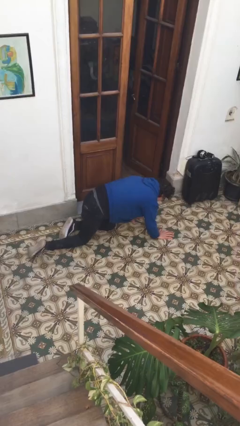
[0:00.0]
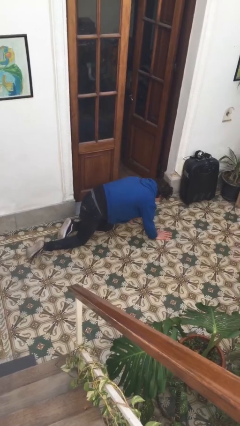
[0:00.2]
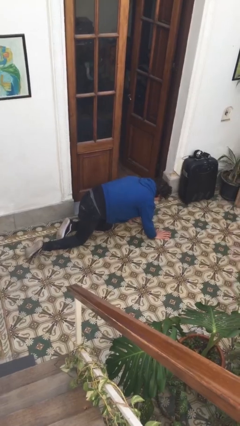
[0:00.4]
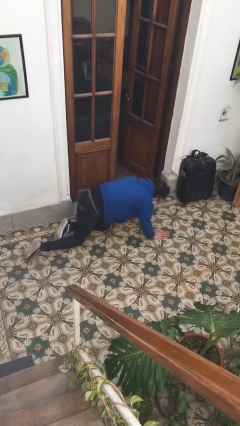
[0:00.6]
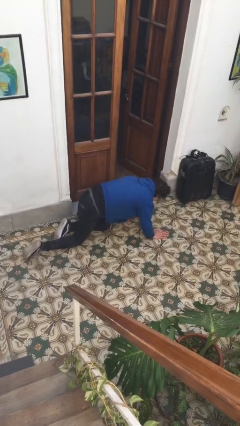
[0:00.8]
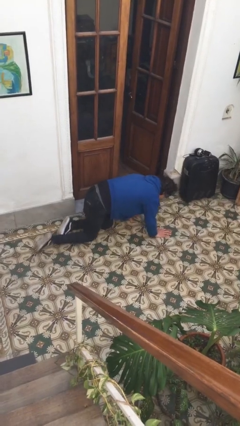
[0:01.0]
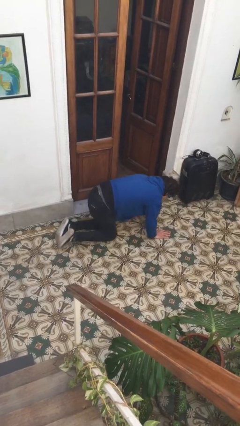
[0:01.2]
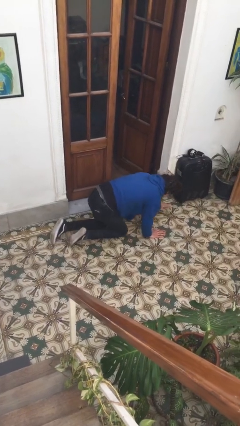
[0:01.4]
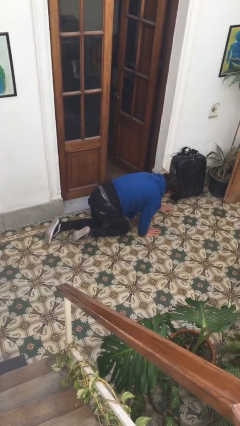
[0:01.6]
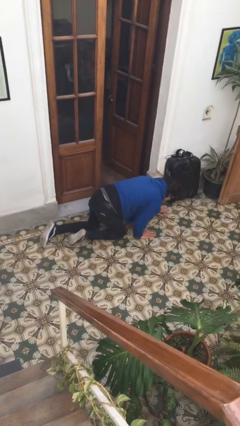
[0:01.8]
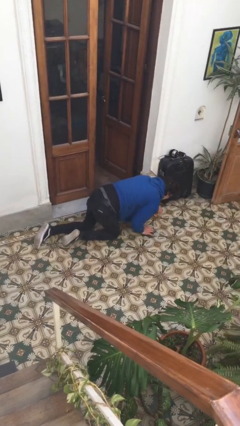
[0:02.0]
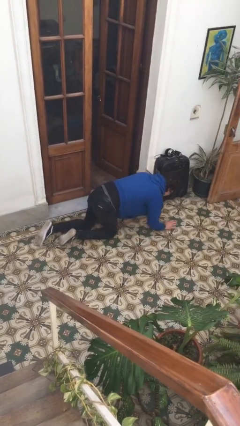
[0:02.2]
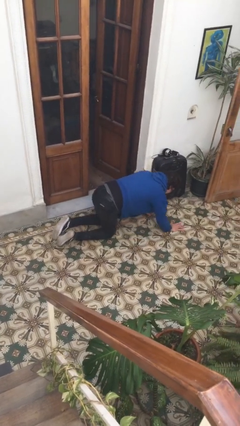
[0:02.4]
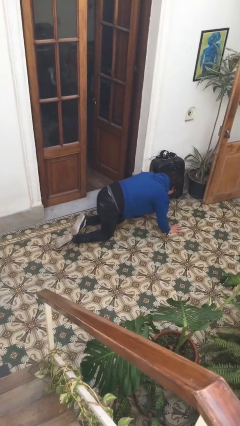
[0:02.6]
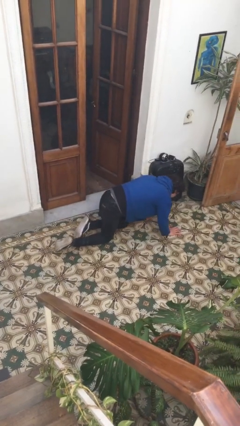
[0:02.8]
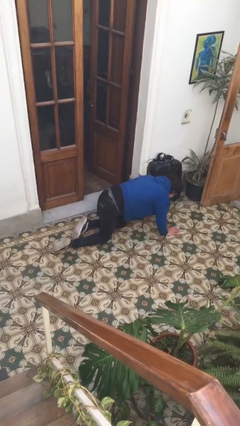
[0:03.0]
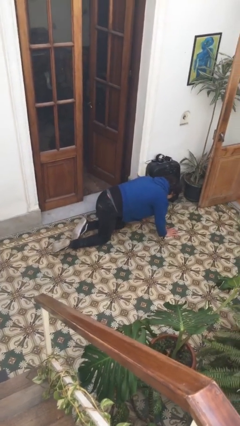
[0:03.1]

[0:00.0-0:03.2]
person crawls

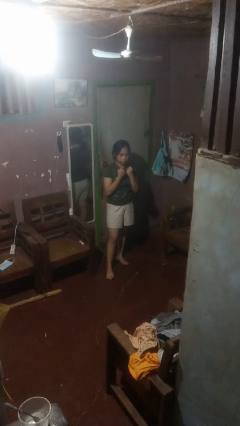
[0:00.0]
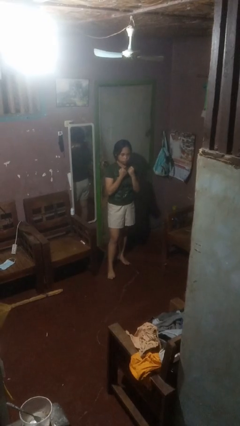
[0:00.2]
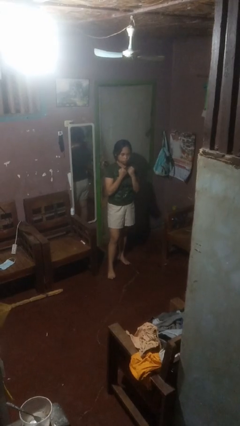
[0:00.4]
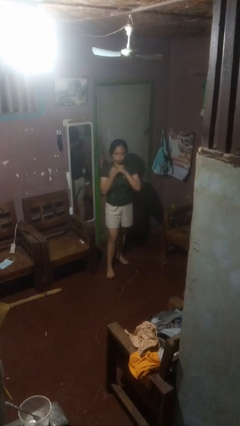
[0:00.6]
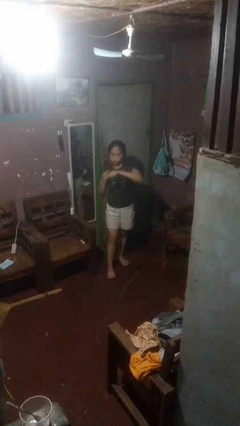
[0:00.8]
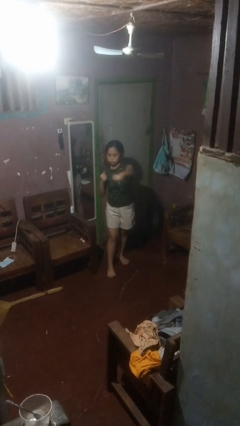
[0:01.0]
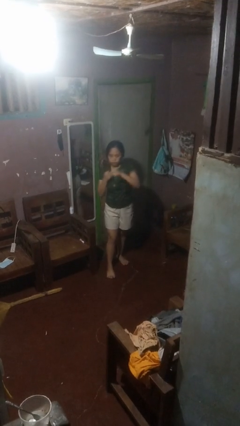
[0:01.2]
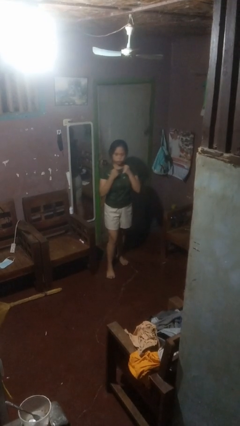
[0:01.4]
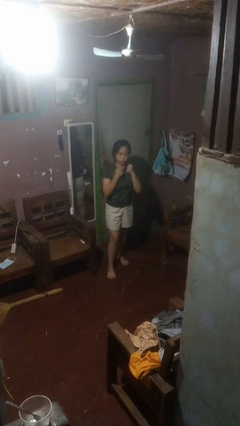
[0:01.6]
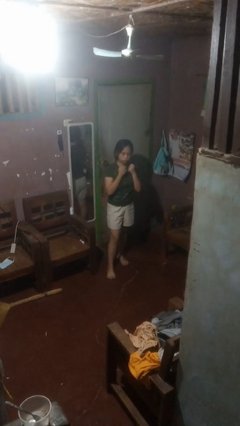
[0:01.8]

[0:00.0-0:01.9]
person punches

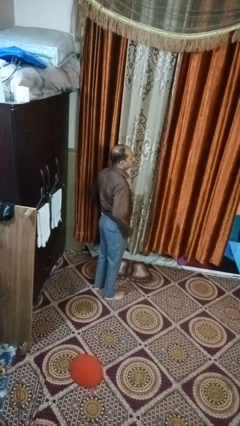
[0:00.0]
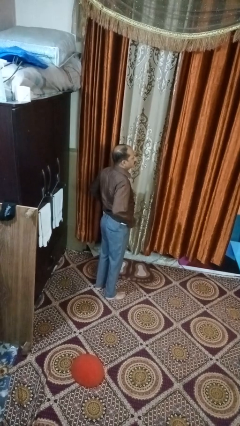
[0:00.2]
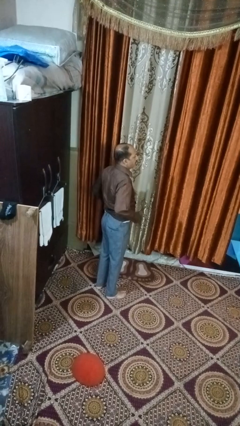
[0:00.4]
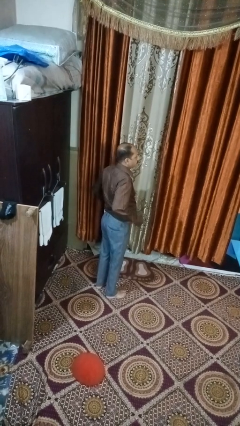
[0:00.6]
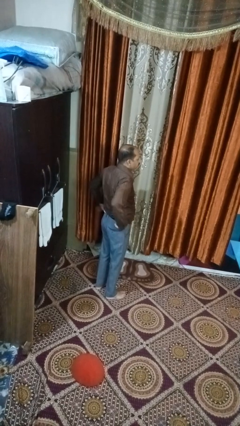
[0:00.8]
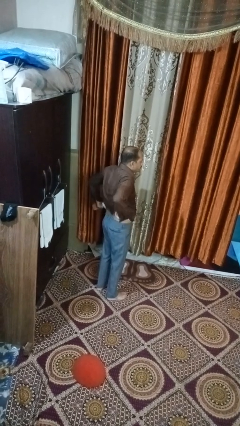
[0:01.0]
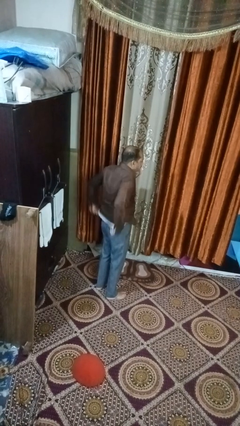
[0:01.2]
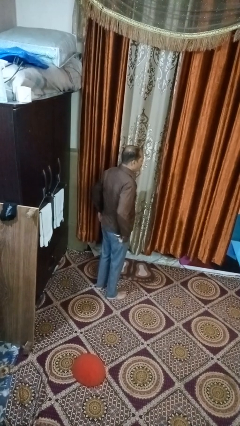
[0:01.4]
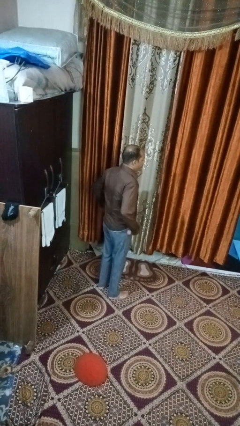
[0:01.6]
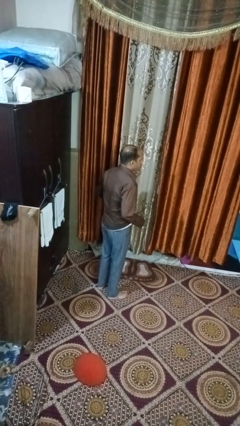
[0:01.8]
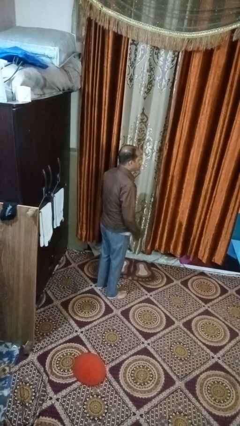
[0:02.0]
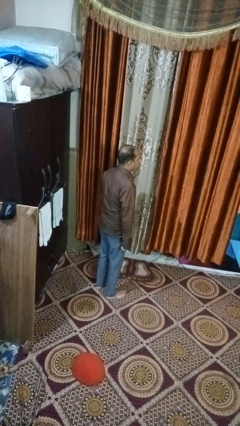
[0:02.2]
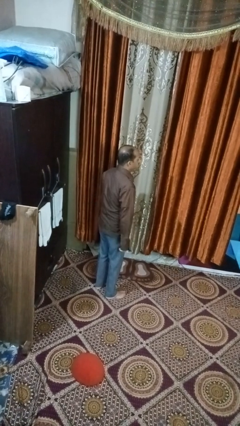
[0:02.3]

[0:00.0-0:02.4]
person untucks shirt

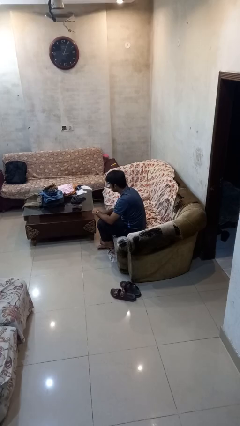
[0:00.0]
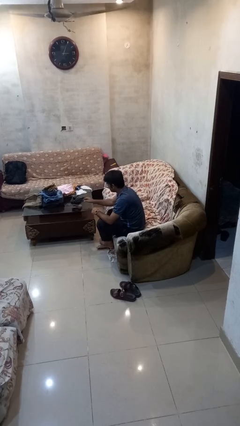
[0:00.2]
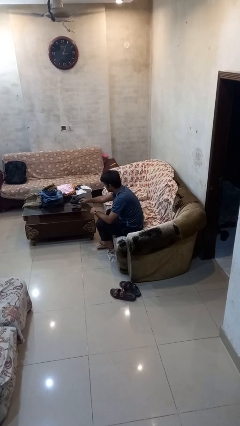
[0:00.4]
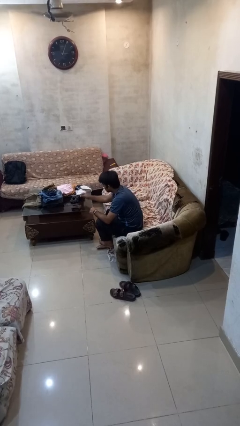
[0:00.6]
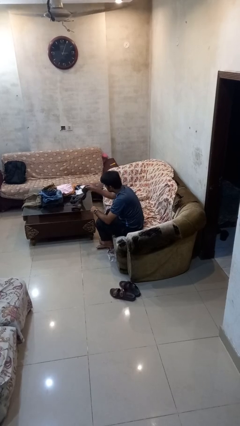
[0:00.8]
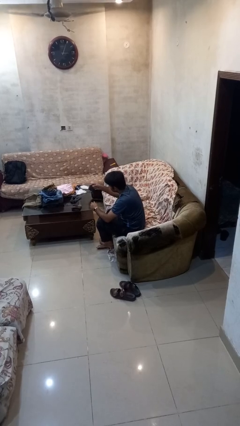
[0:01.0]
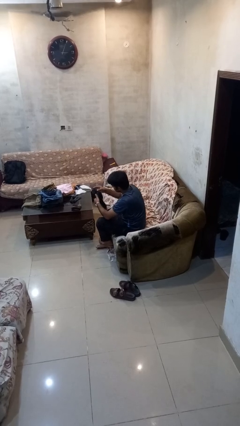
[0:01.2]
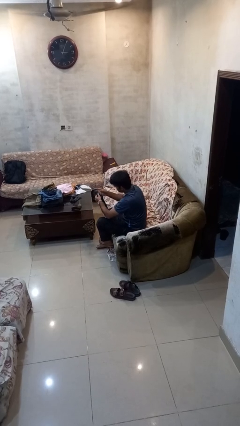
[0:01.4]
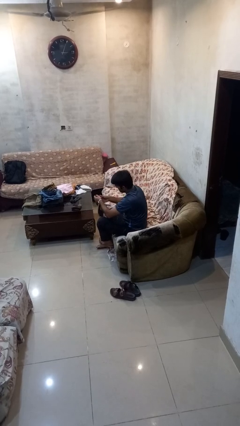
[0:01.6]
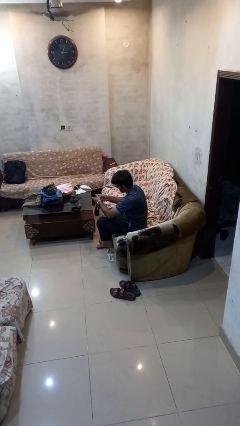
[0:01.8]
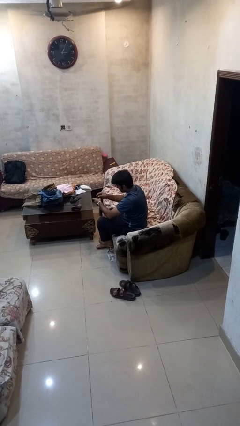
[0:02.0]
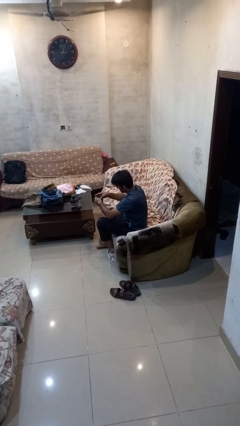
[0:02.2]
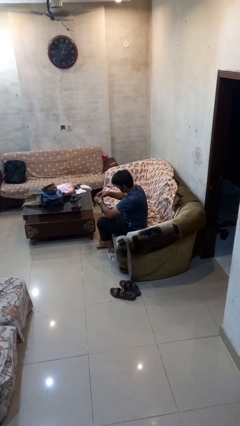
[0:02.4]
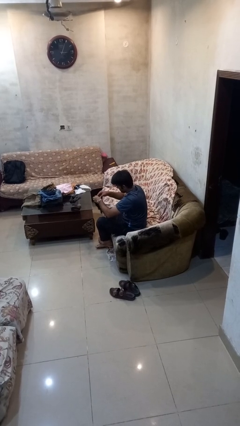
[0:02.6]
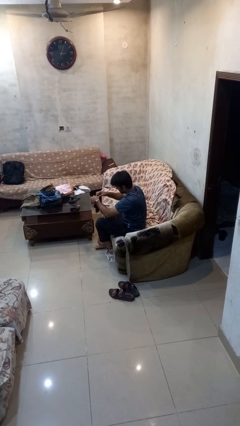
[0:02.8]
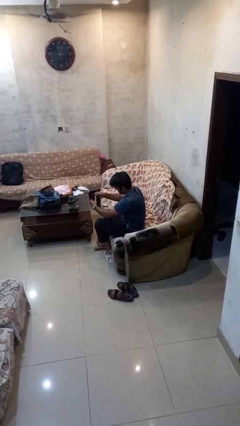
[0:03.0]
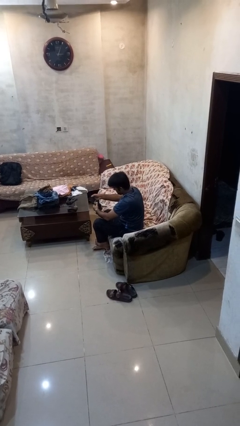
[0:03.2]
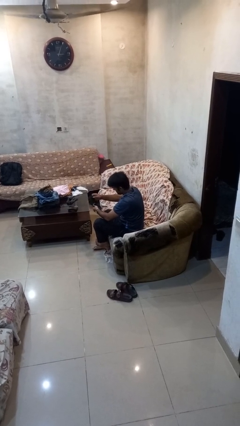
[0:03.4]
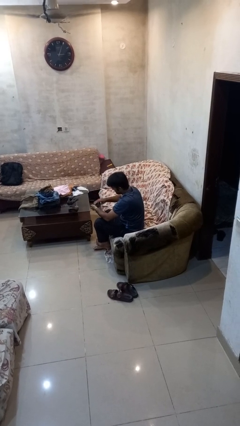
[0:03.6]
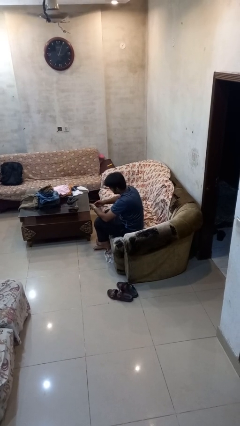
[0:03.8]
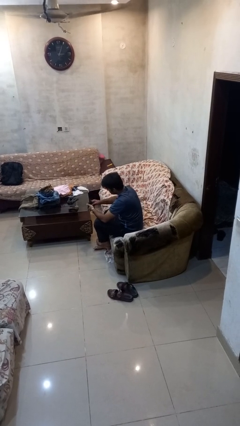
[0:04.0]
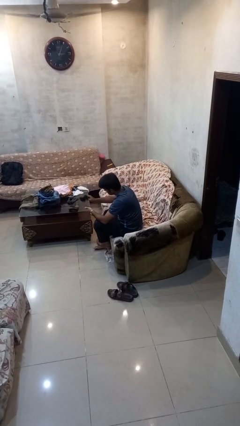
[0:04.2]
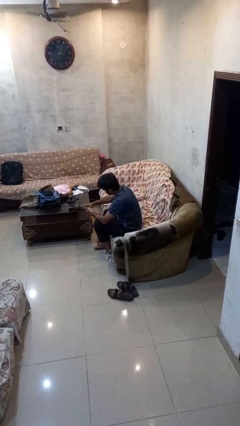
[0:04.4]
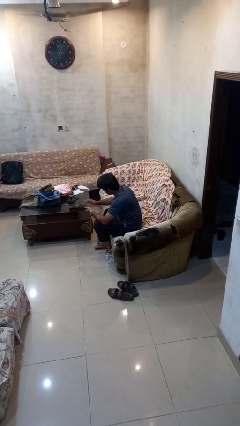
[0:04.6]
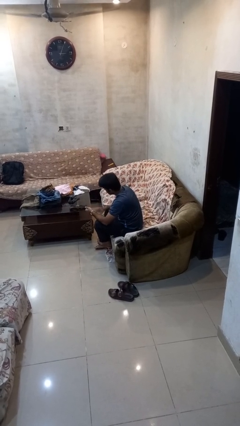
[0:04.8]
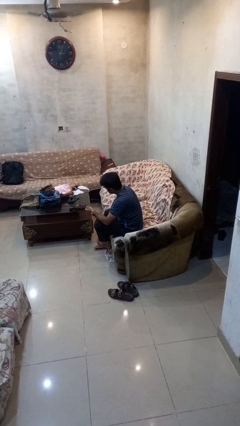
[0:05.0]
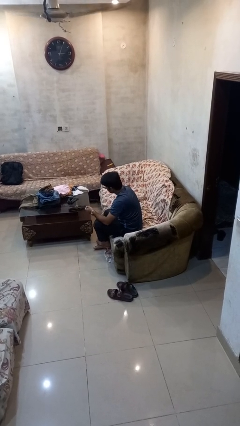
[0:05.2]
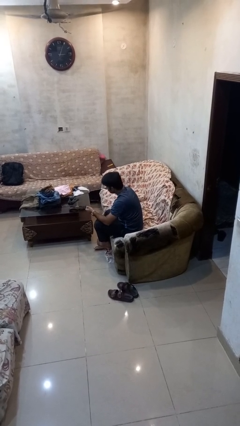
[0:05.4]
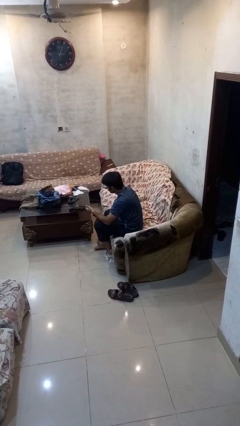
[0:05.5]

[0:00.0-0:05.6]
person folds socks

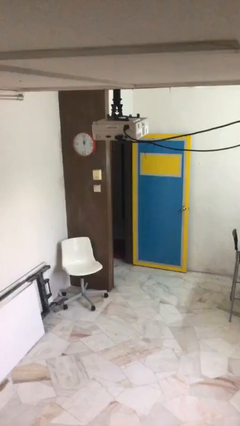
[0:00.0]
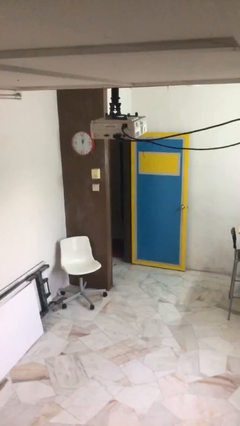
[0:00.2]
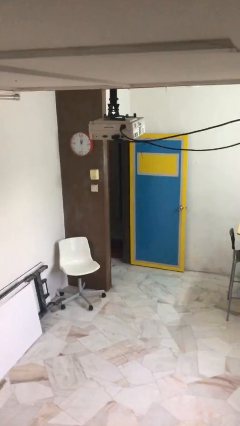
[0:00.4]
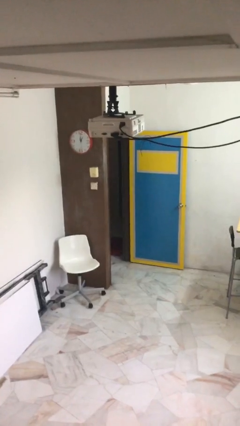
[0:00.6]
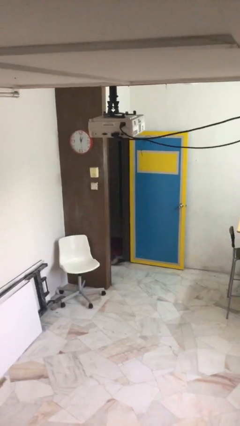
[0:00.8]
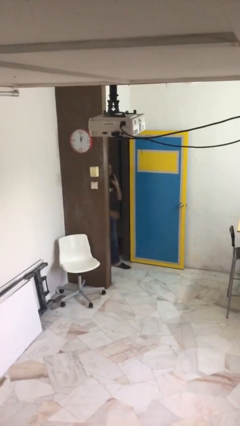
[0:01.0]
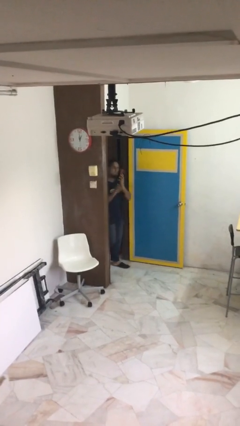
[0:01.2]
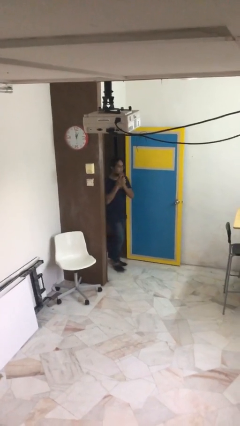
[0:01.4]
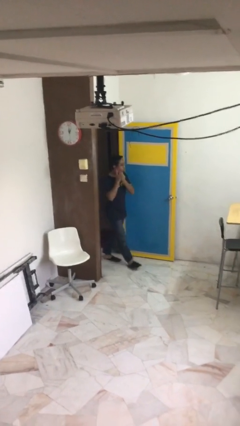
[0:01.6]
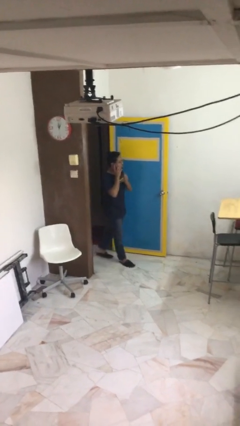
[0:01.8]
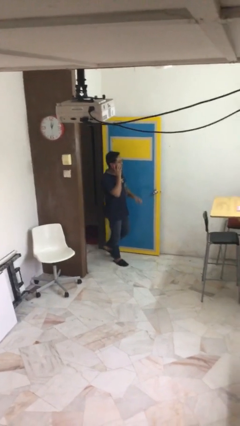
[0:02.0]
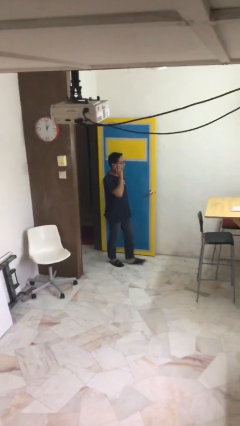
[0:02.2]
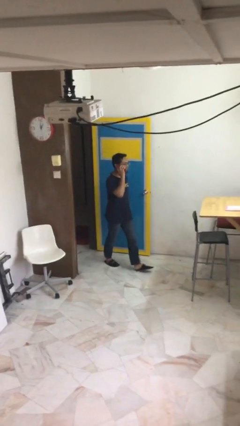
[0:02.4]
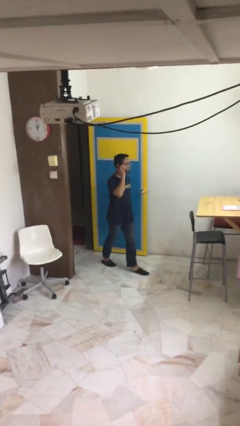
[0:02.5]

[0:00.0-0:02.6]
person enters scene through structure

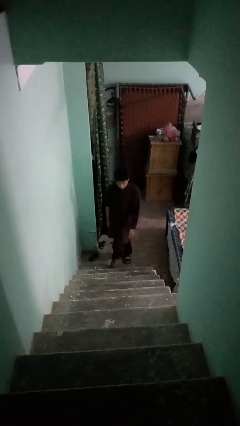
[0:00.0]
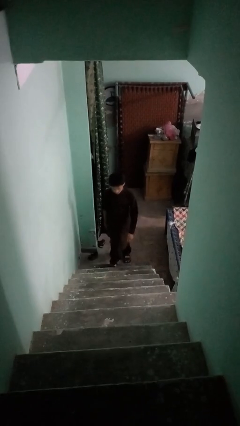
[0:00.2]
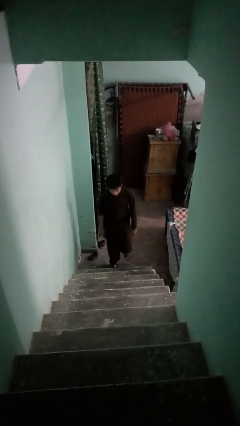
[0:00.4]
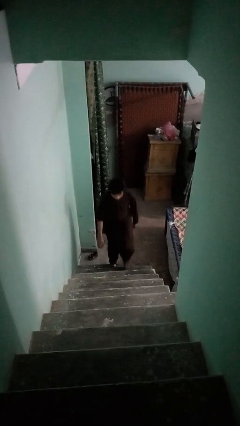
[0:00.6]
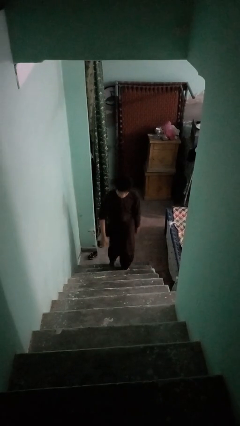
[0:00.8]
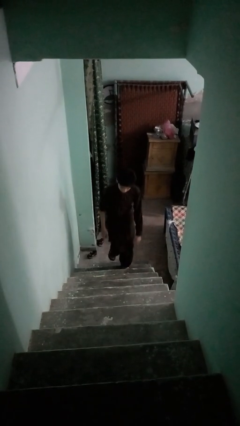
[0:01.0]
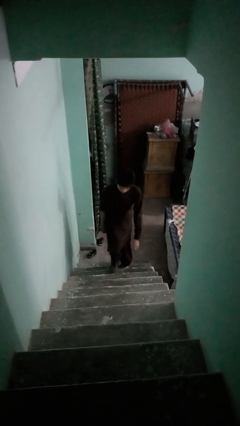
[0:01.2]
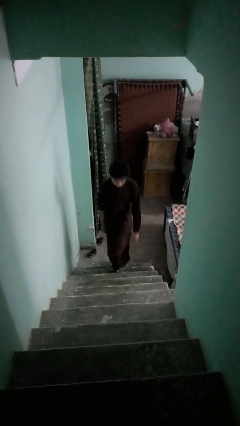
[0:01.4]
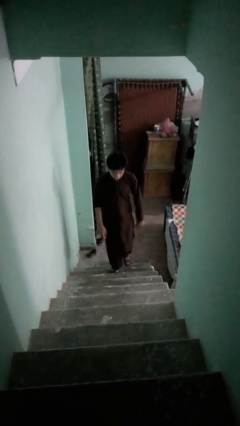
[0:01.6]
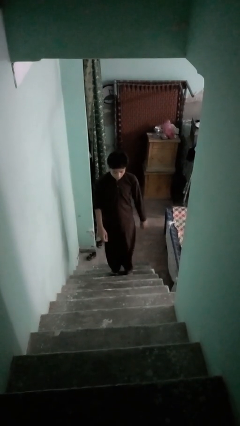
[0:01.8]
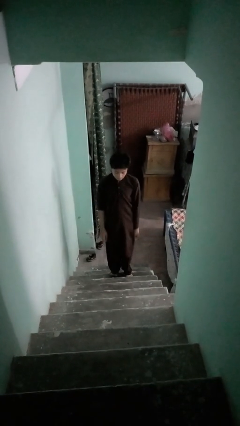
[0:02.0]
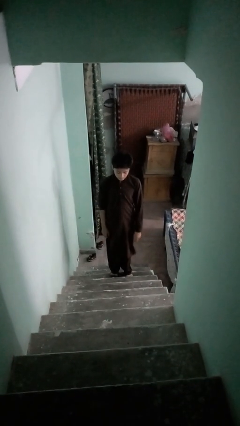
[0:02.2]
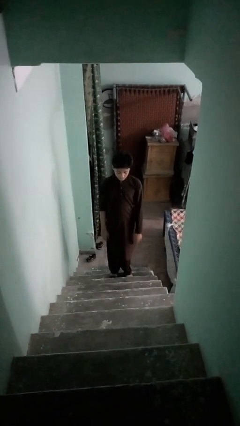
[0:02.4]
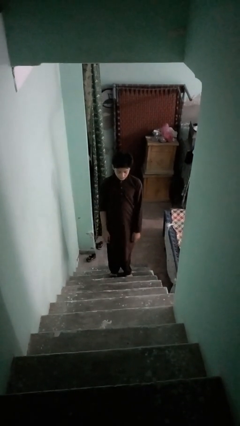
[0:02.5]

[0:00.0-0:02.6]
person climbs up stairs
